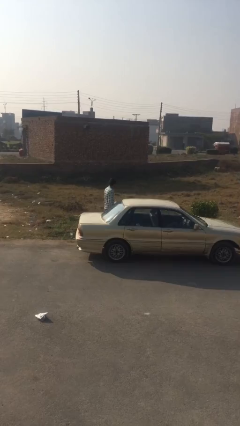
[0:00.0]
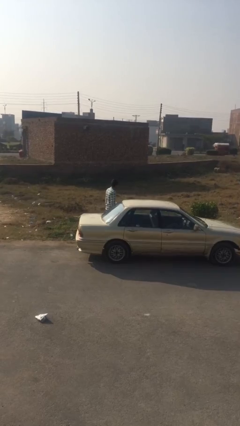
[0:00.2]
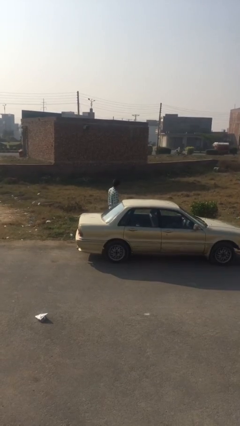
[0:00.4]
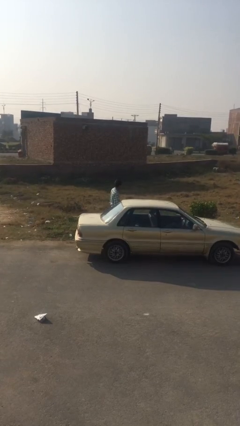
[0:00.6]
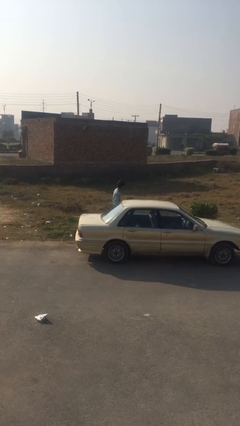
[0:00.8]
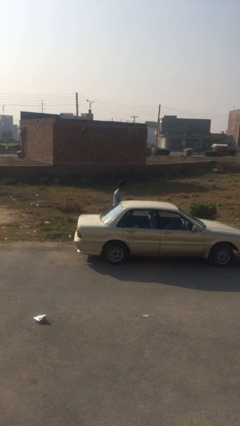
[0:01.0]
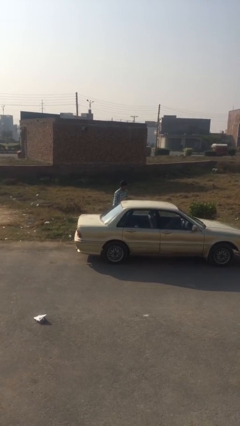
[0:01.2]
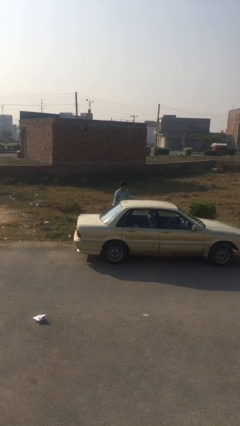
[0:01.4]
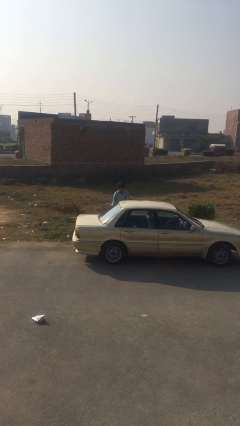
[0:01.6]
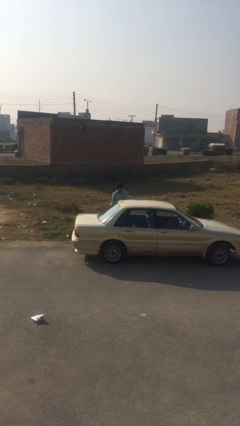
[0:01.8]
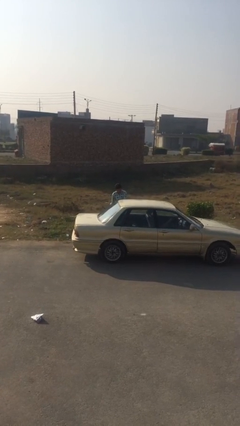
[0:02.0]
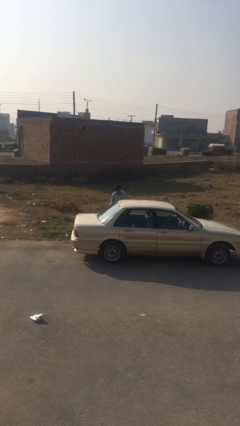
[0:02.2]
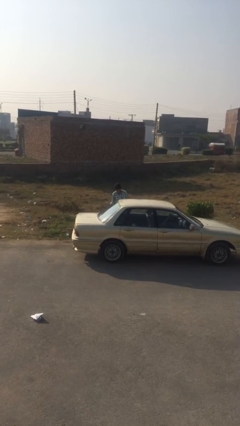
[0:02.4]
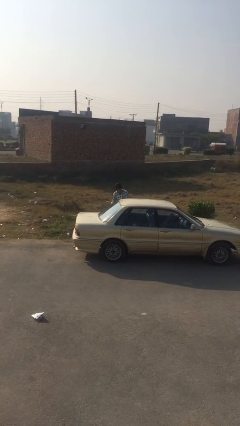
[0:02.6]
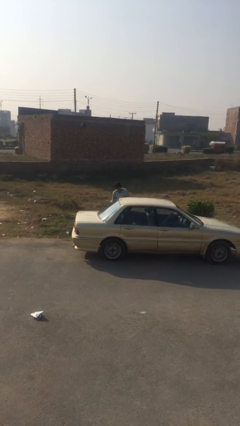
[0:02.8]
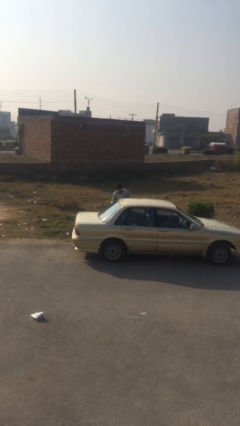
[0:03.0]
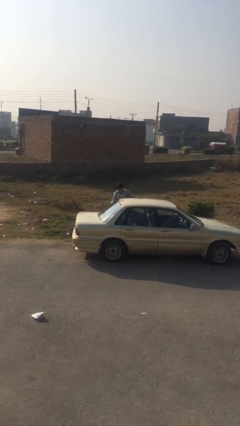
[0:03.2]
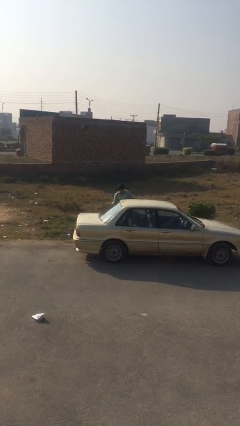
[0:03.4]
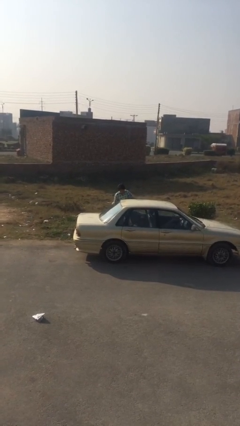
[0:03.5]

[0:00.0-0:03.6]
person opens car door

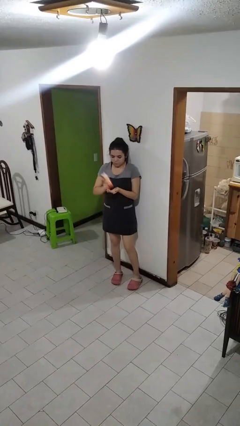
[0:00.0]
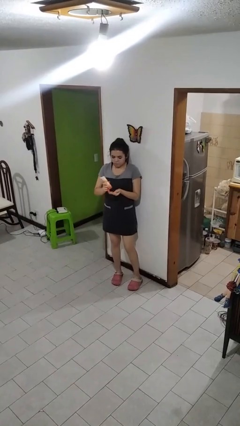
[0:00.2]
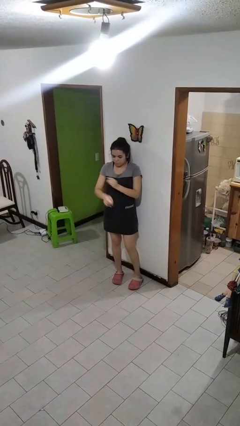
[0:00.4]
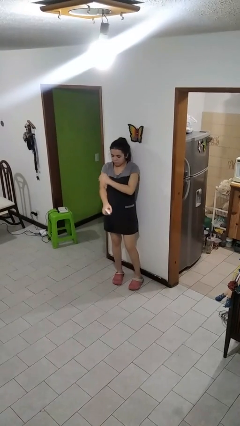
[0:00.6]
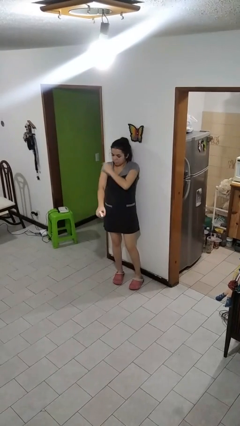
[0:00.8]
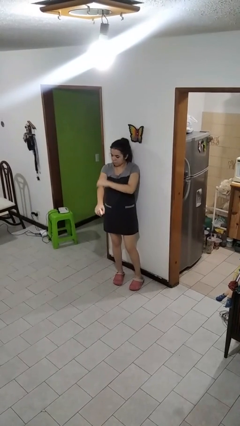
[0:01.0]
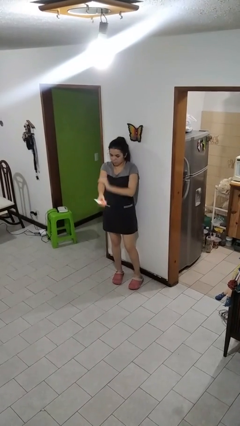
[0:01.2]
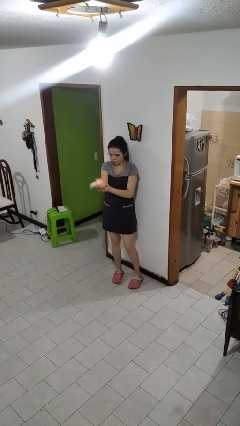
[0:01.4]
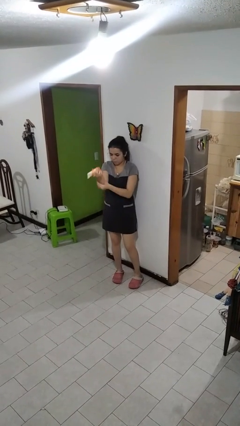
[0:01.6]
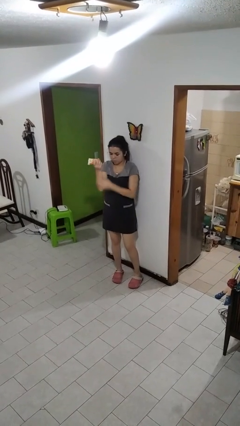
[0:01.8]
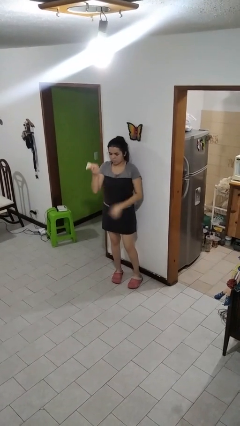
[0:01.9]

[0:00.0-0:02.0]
person applies sunscreen

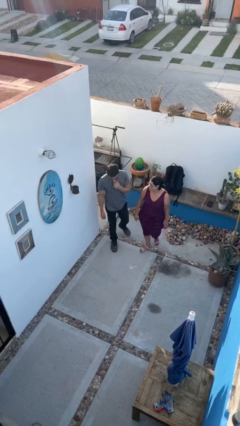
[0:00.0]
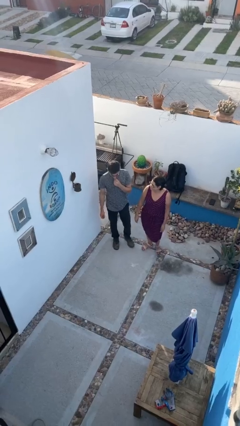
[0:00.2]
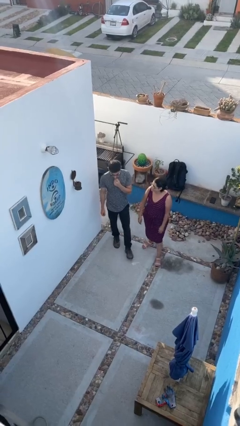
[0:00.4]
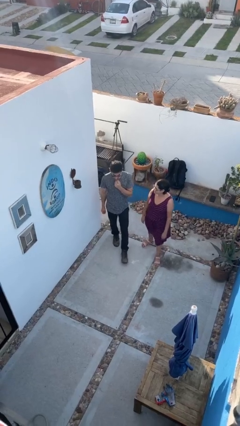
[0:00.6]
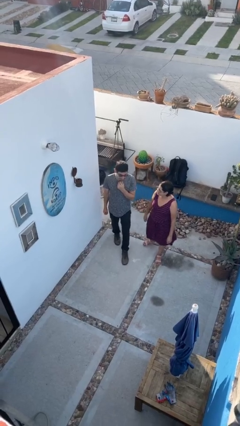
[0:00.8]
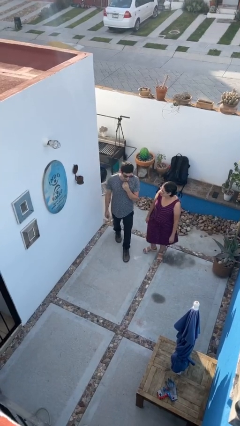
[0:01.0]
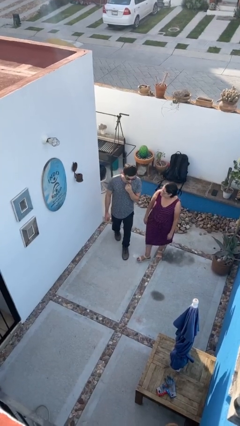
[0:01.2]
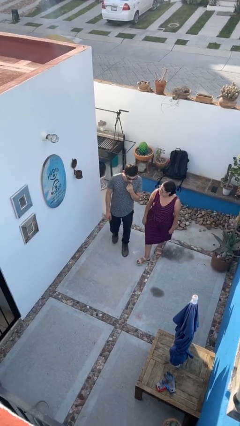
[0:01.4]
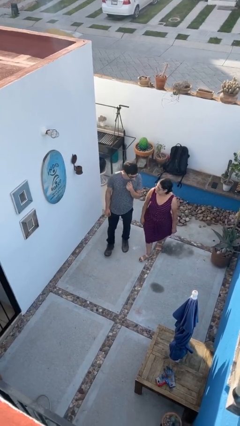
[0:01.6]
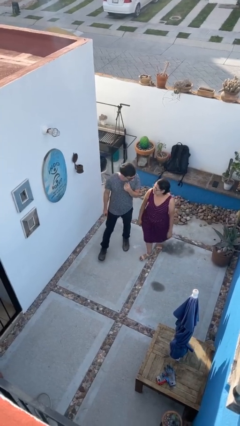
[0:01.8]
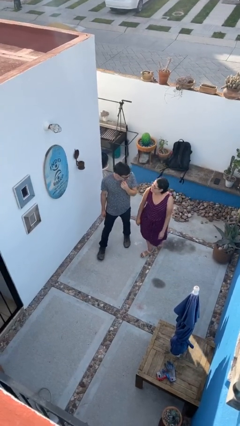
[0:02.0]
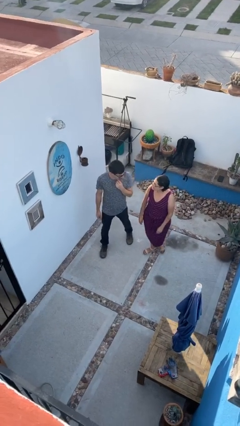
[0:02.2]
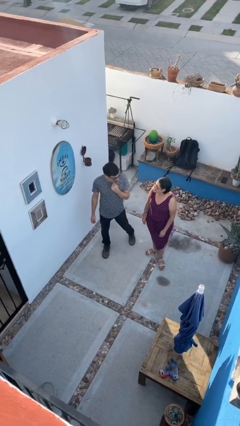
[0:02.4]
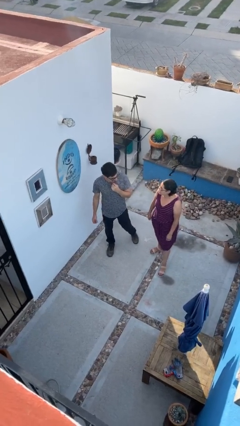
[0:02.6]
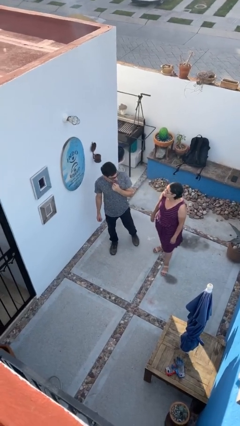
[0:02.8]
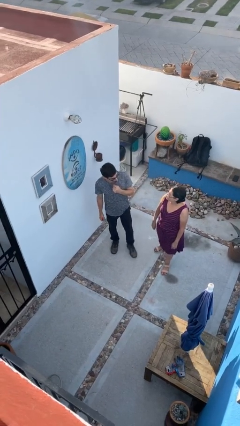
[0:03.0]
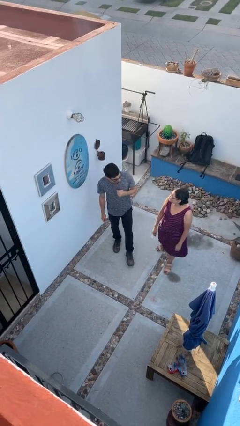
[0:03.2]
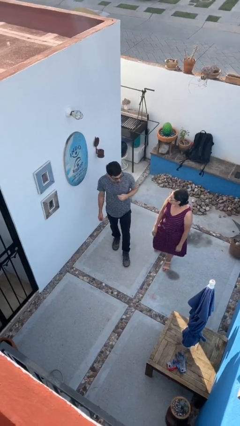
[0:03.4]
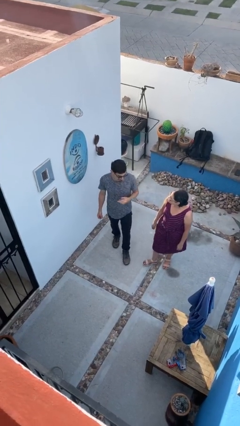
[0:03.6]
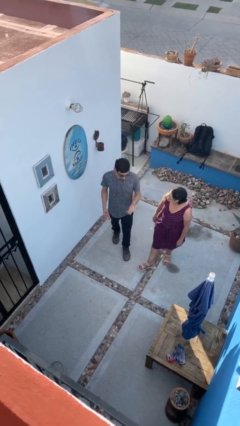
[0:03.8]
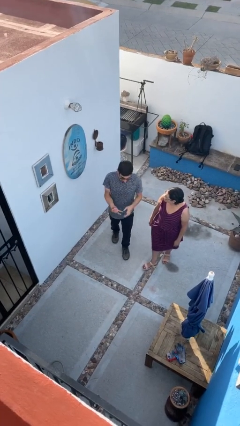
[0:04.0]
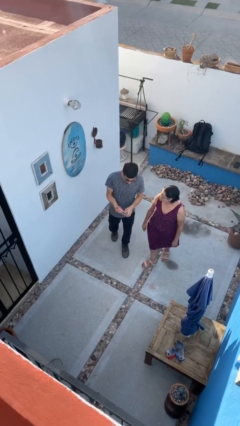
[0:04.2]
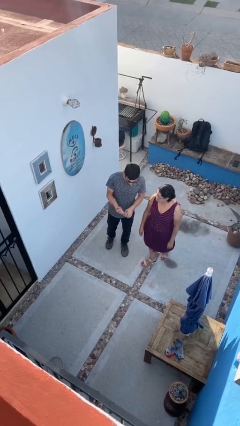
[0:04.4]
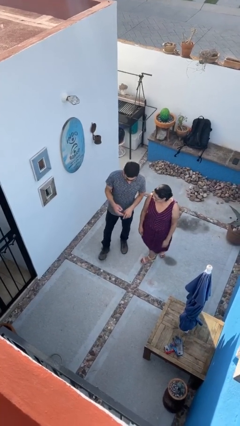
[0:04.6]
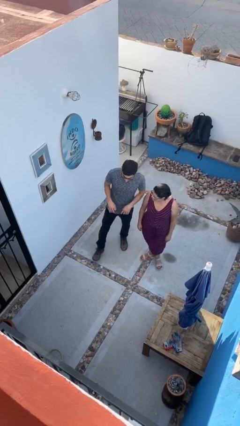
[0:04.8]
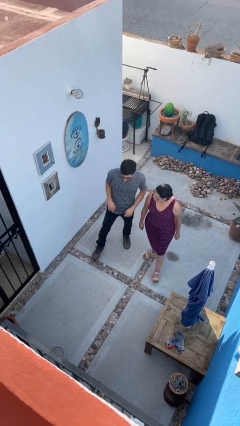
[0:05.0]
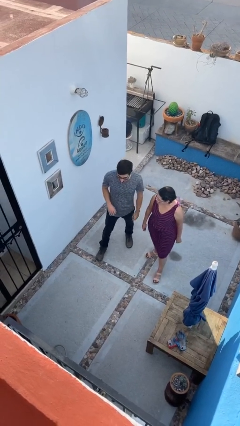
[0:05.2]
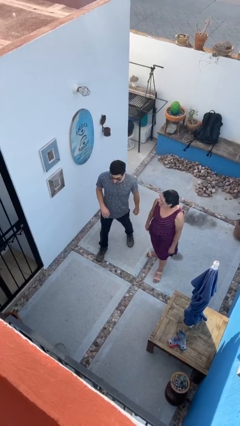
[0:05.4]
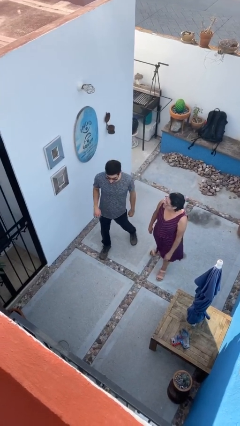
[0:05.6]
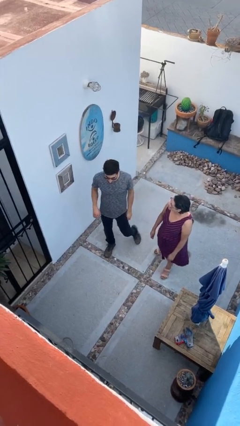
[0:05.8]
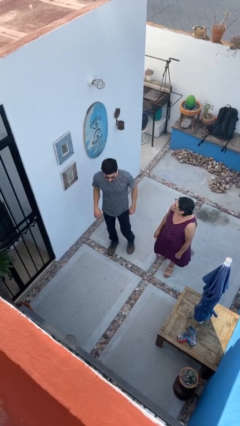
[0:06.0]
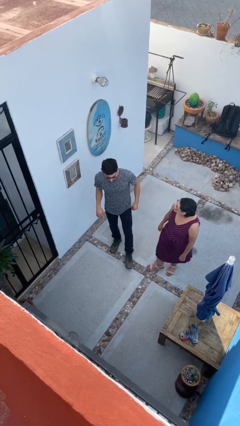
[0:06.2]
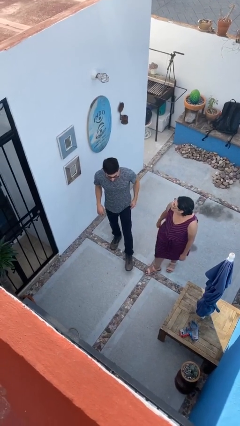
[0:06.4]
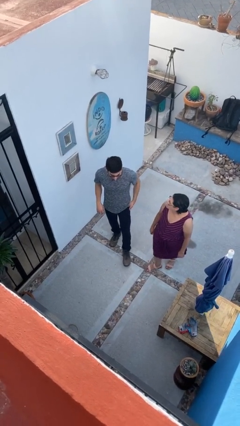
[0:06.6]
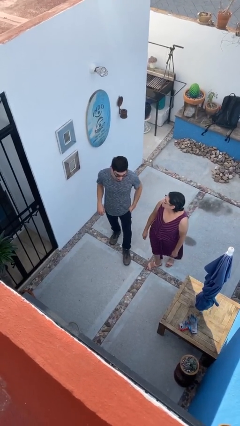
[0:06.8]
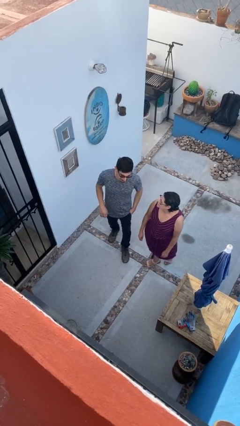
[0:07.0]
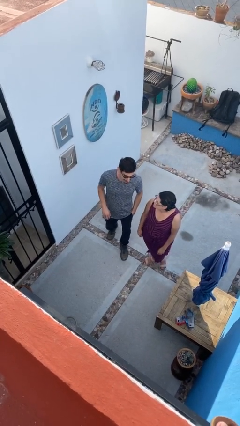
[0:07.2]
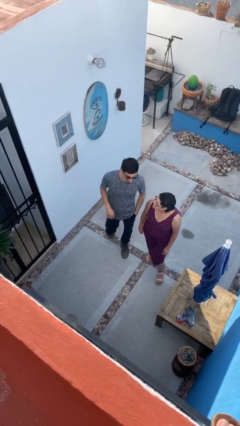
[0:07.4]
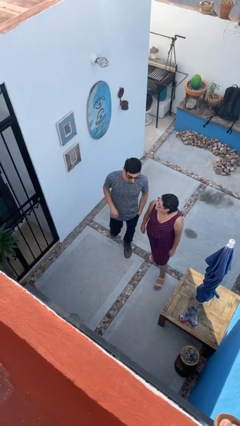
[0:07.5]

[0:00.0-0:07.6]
person talks to person

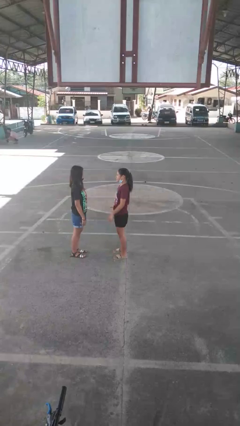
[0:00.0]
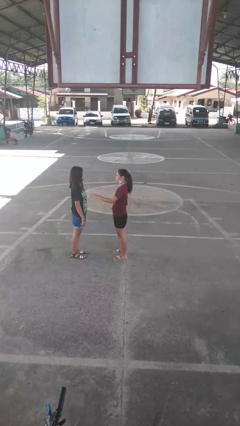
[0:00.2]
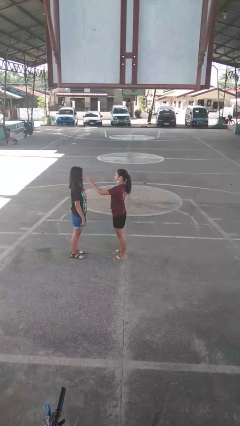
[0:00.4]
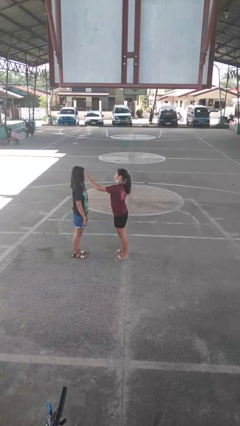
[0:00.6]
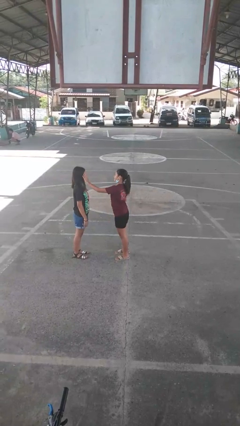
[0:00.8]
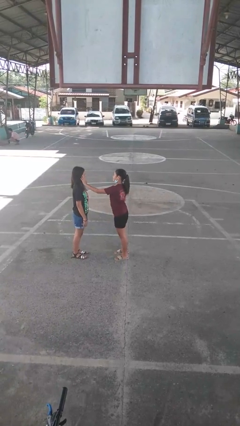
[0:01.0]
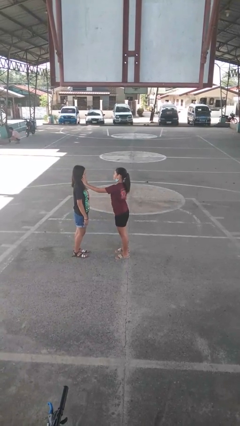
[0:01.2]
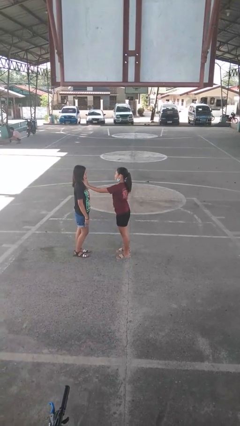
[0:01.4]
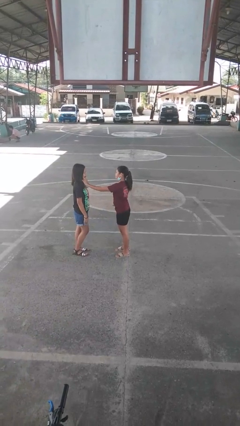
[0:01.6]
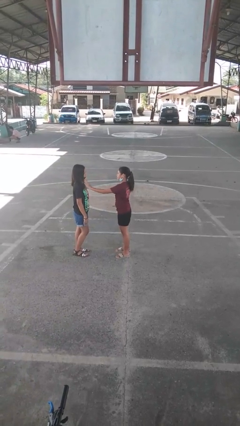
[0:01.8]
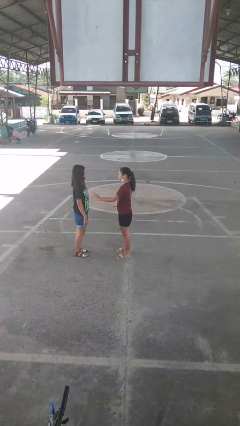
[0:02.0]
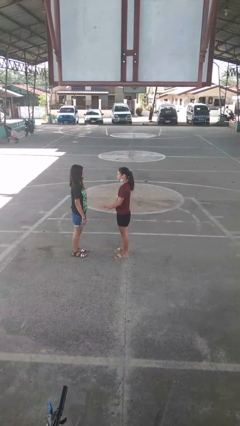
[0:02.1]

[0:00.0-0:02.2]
person touches face of person

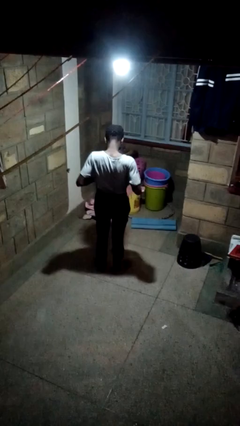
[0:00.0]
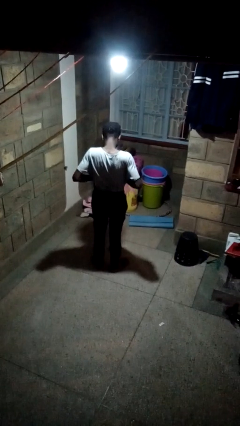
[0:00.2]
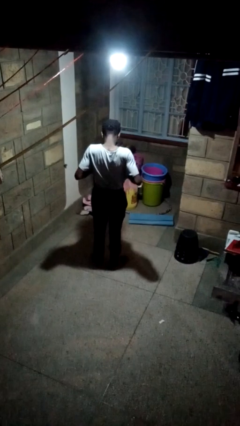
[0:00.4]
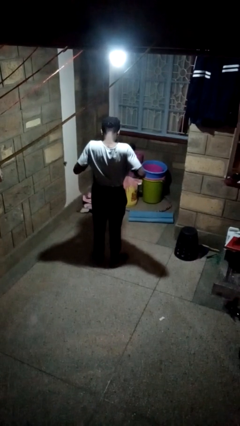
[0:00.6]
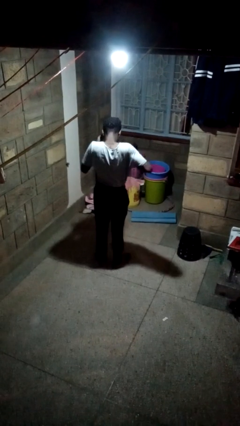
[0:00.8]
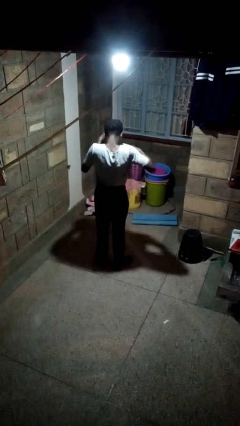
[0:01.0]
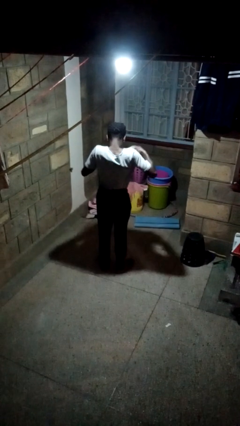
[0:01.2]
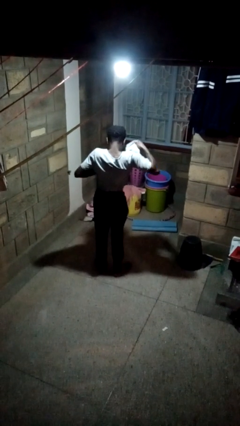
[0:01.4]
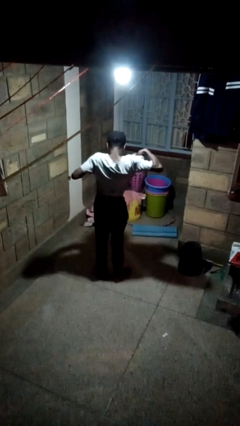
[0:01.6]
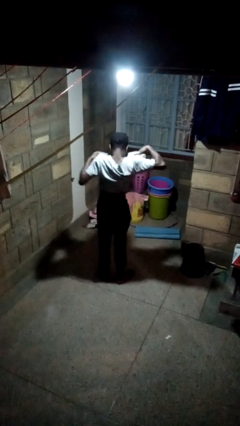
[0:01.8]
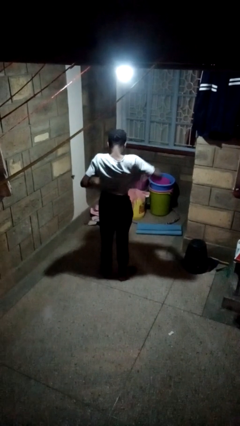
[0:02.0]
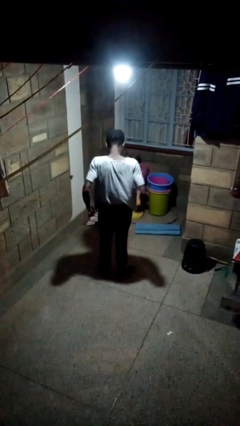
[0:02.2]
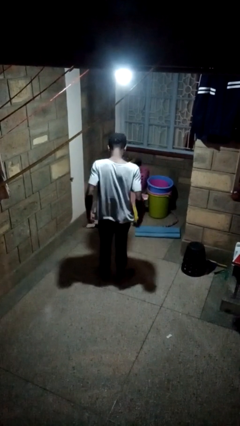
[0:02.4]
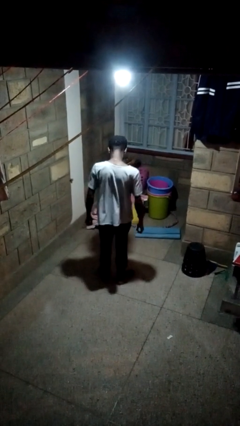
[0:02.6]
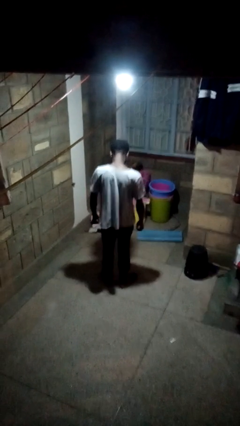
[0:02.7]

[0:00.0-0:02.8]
person untucks shirt
